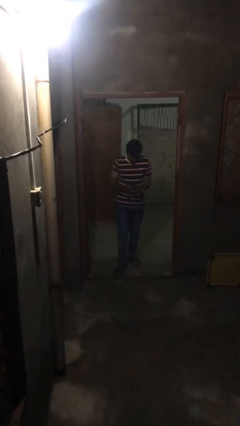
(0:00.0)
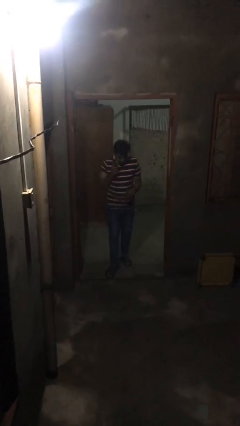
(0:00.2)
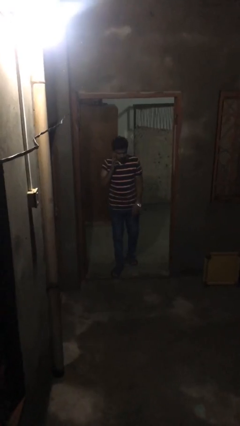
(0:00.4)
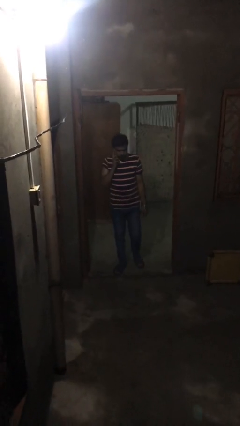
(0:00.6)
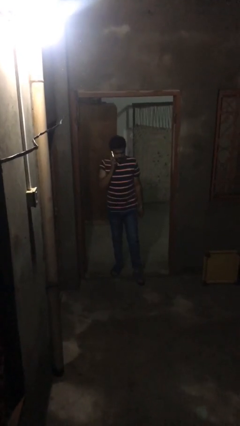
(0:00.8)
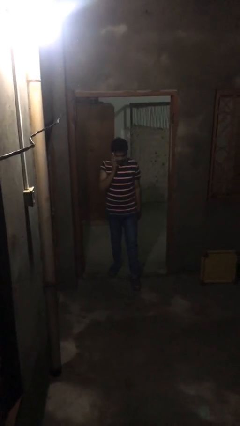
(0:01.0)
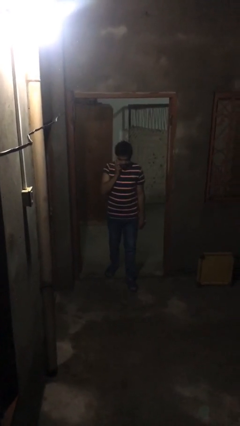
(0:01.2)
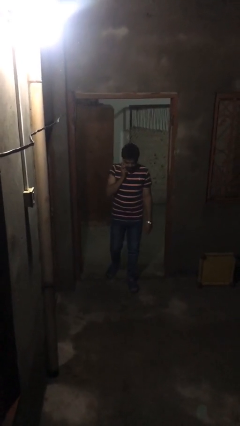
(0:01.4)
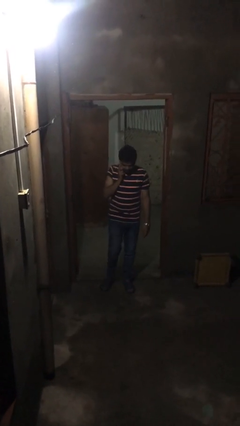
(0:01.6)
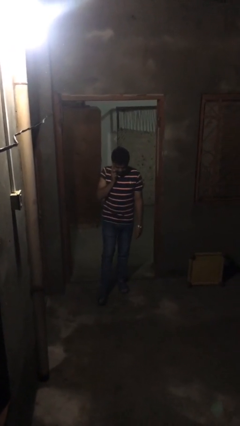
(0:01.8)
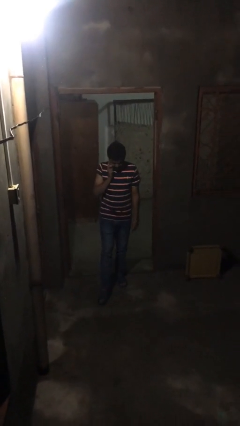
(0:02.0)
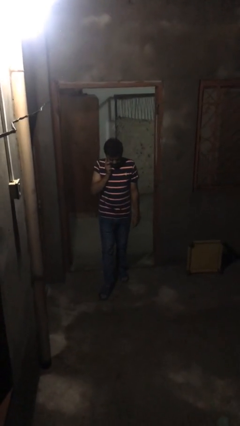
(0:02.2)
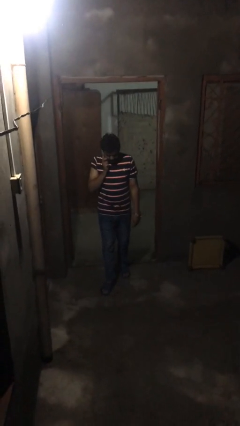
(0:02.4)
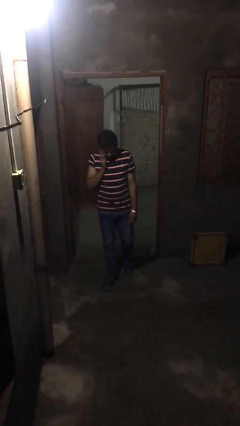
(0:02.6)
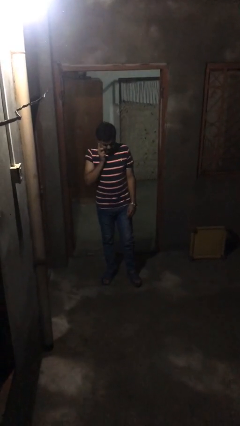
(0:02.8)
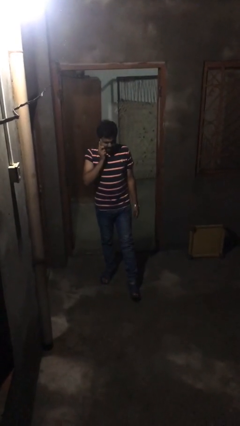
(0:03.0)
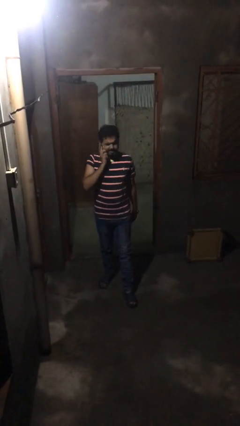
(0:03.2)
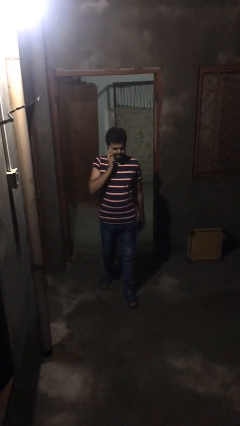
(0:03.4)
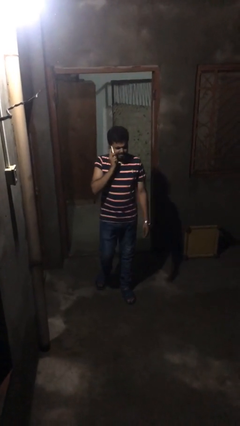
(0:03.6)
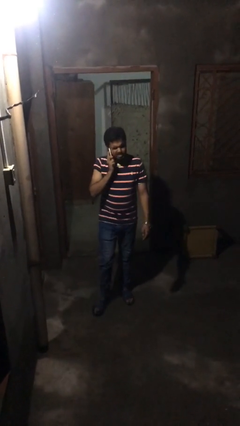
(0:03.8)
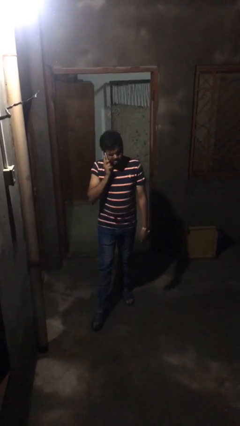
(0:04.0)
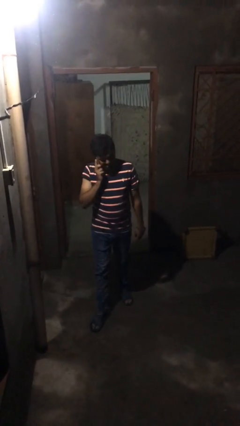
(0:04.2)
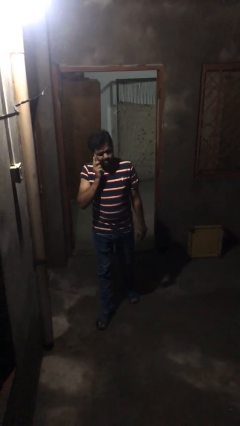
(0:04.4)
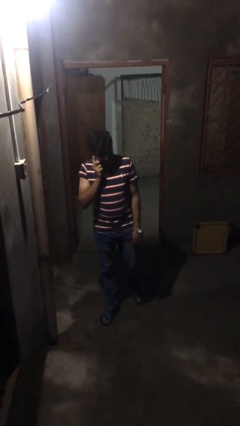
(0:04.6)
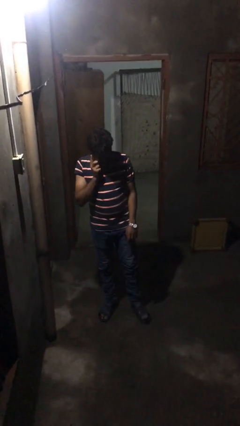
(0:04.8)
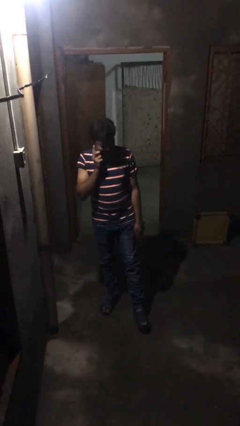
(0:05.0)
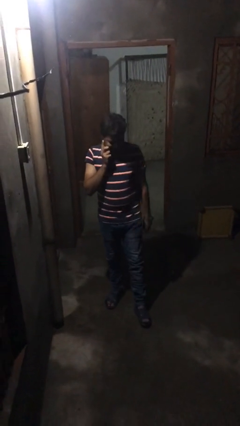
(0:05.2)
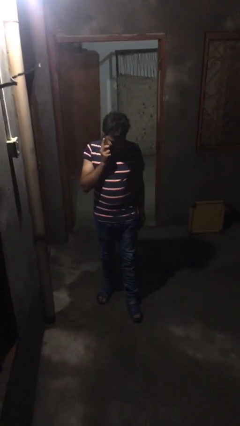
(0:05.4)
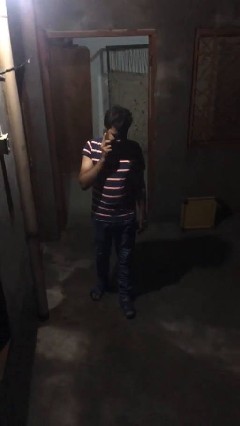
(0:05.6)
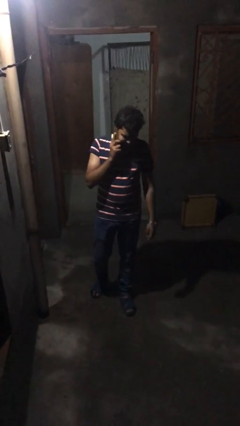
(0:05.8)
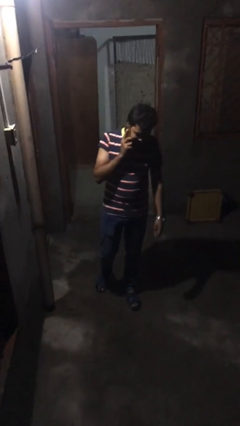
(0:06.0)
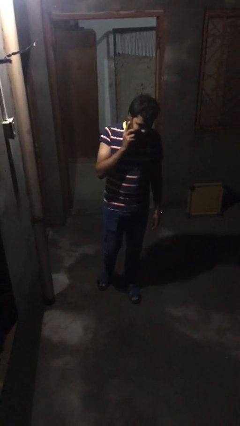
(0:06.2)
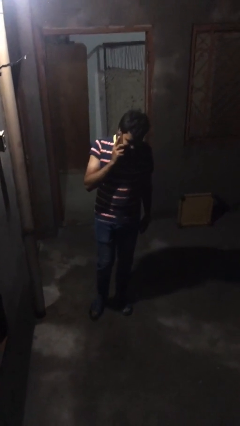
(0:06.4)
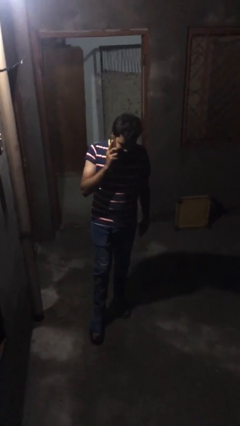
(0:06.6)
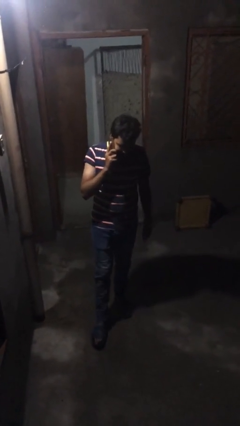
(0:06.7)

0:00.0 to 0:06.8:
person talks on phone

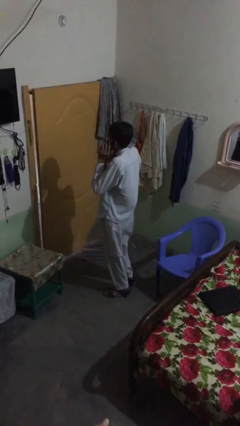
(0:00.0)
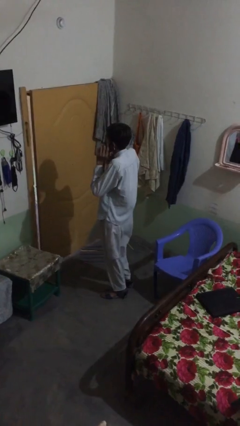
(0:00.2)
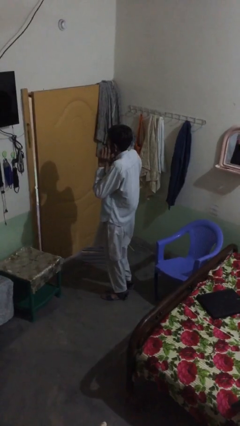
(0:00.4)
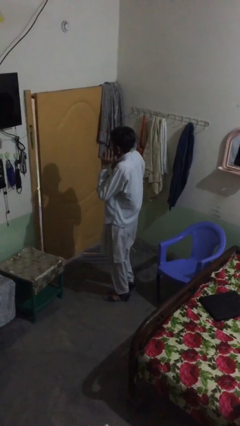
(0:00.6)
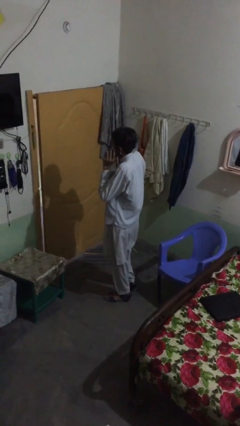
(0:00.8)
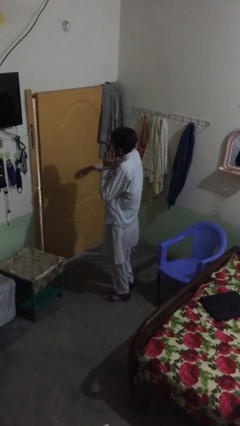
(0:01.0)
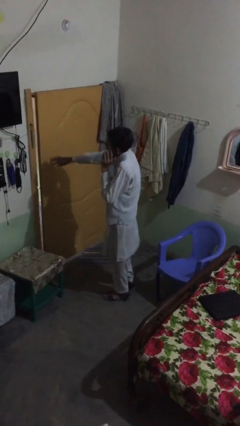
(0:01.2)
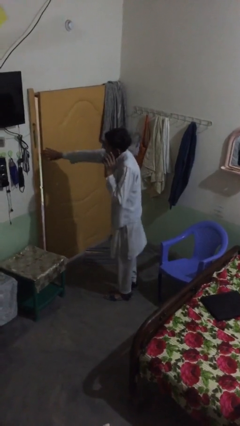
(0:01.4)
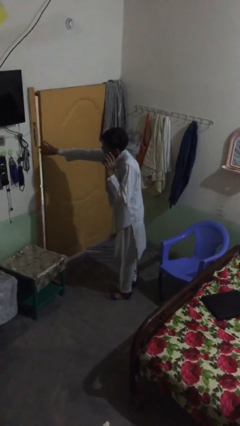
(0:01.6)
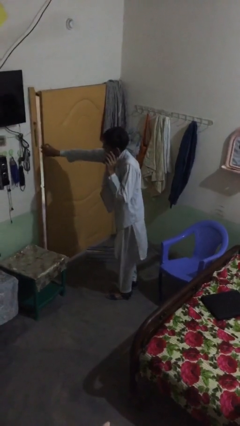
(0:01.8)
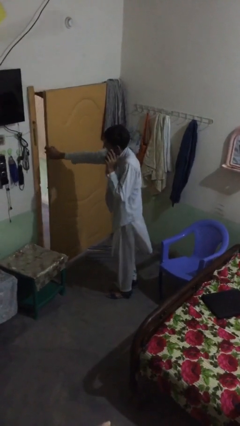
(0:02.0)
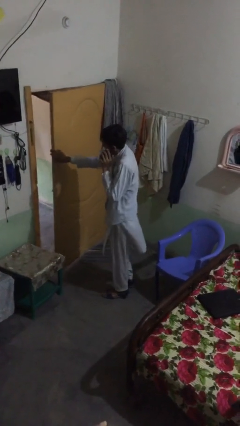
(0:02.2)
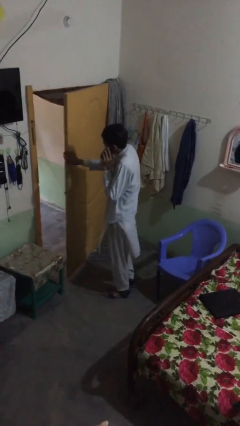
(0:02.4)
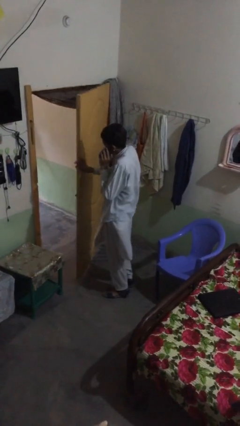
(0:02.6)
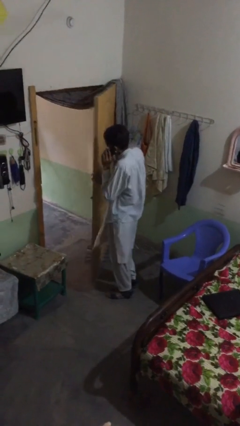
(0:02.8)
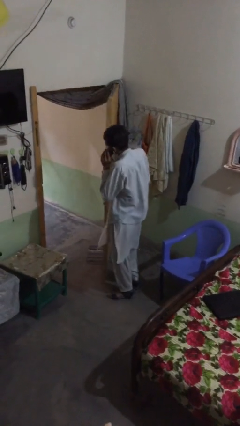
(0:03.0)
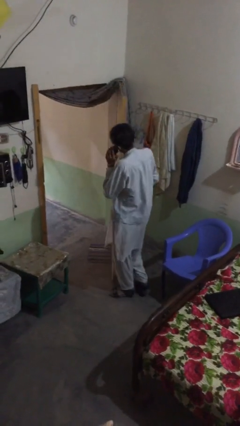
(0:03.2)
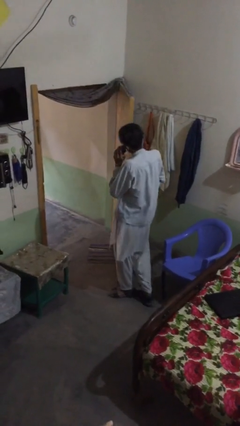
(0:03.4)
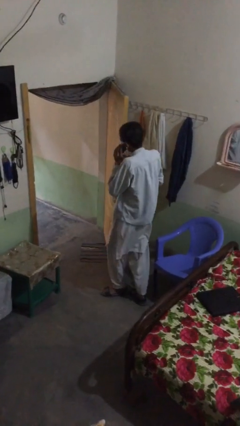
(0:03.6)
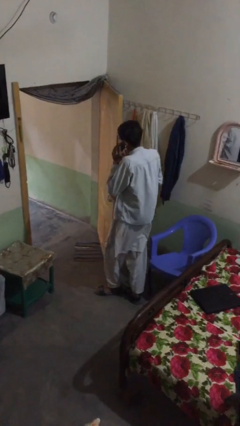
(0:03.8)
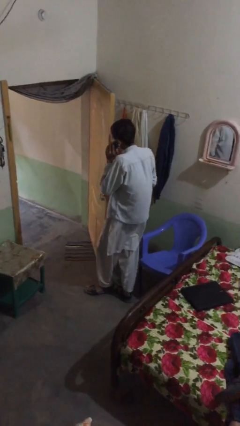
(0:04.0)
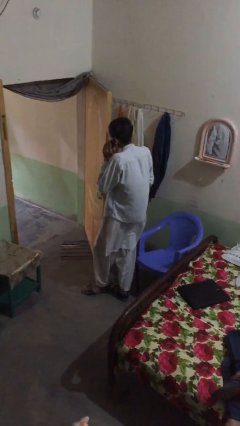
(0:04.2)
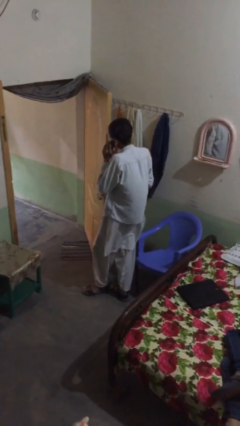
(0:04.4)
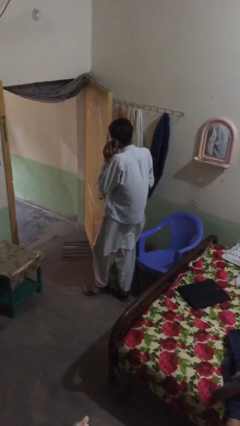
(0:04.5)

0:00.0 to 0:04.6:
person opens facility door

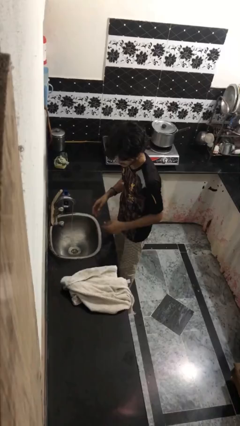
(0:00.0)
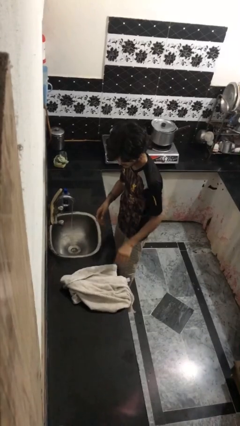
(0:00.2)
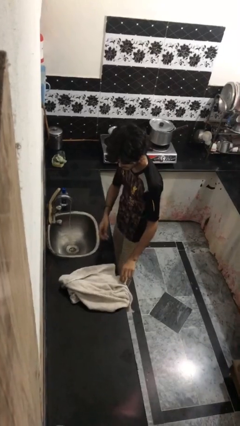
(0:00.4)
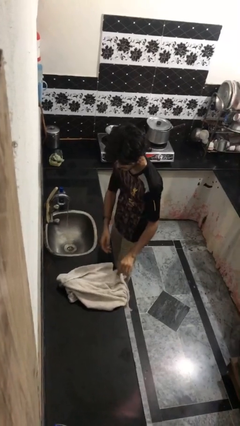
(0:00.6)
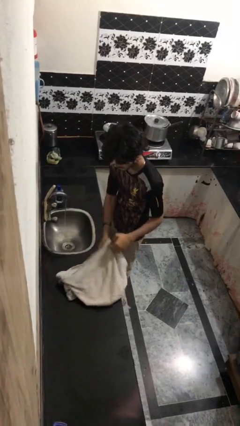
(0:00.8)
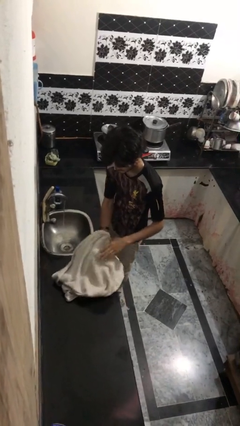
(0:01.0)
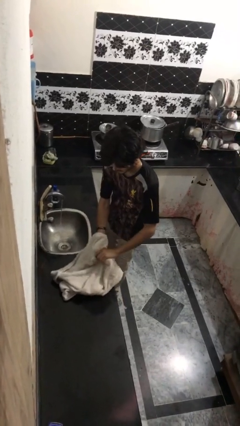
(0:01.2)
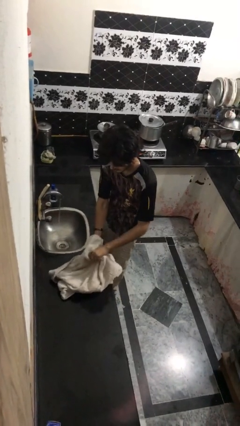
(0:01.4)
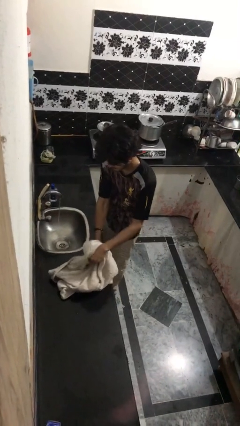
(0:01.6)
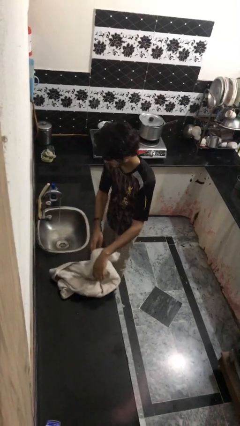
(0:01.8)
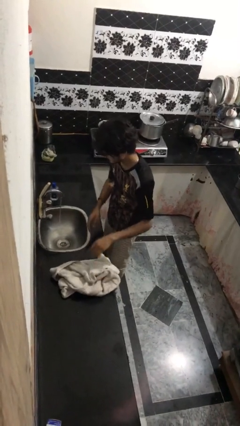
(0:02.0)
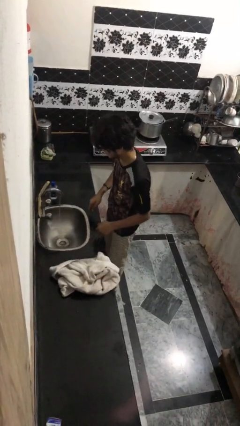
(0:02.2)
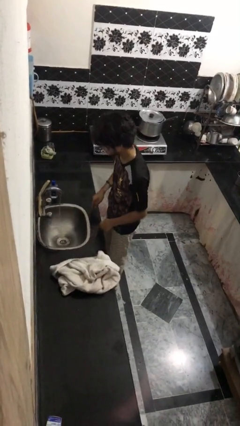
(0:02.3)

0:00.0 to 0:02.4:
person dries hands with towel

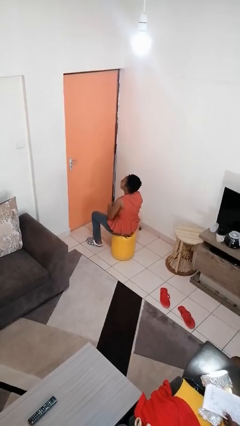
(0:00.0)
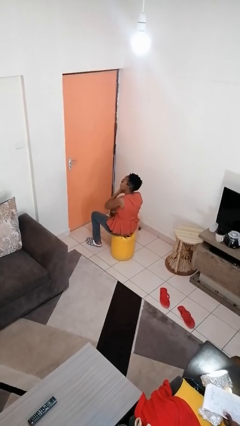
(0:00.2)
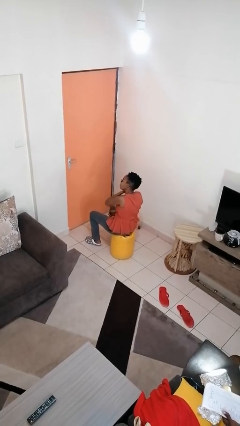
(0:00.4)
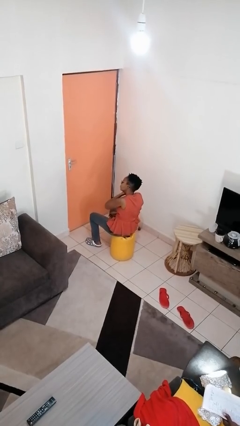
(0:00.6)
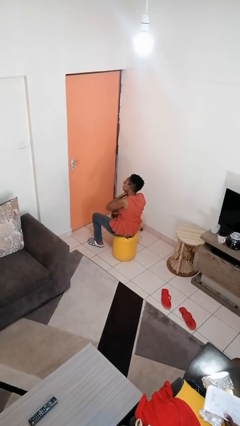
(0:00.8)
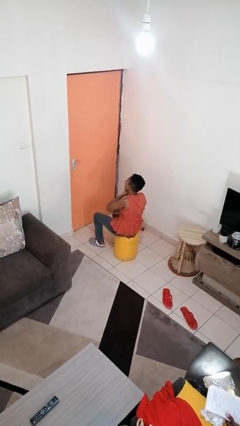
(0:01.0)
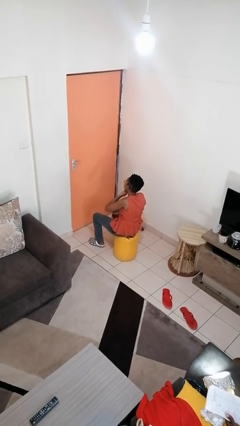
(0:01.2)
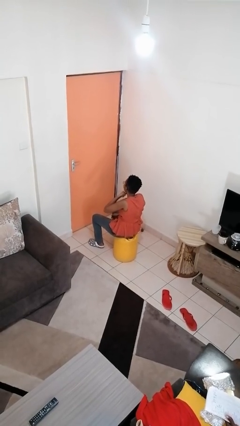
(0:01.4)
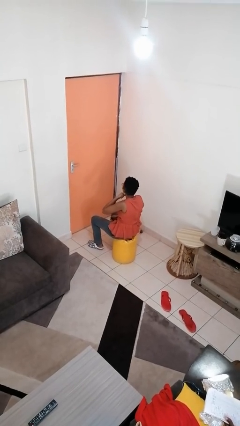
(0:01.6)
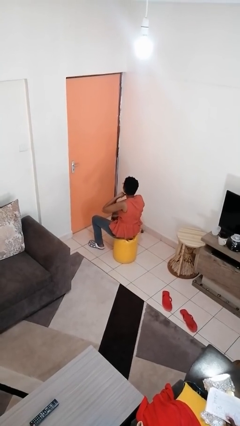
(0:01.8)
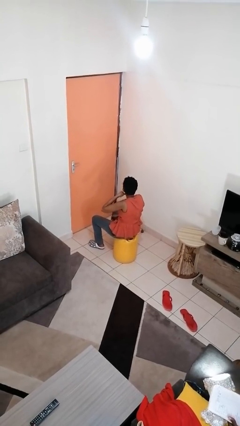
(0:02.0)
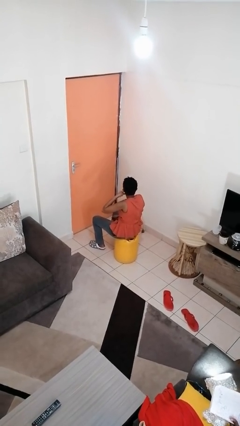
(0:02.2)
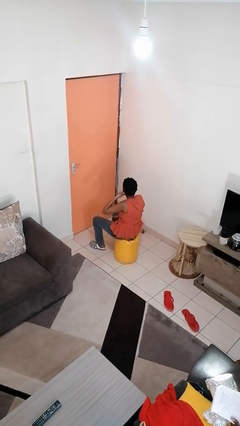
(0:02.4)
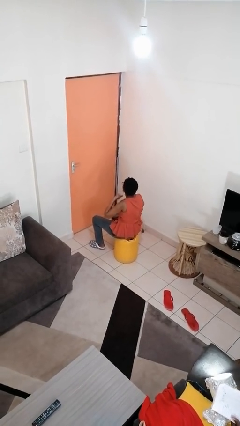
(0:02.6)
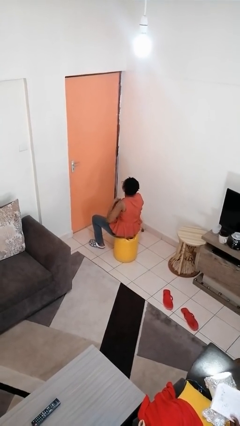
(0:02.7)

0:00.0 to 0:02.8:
person gestures cut

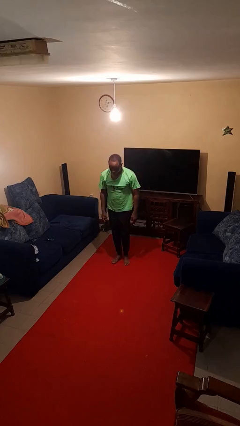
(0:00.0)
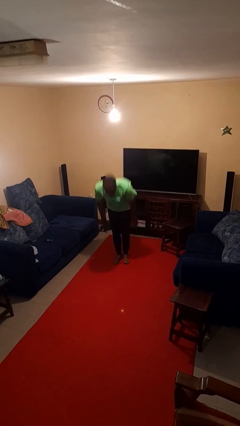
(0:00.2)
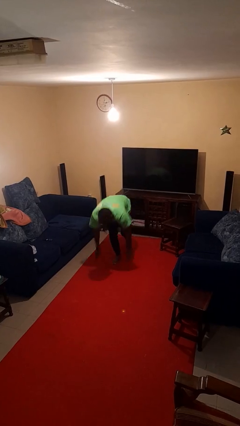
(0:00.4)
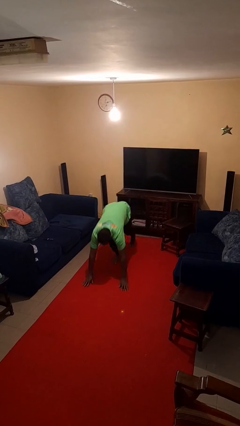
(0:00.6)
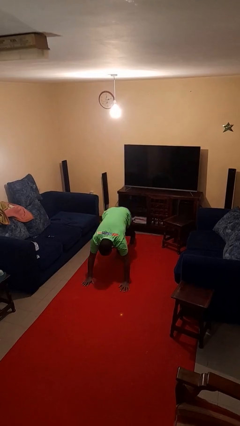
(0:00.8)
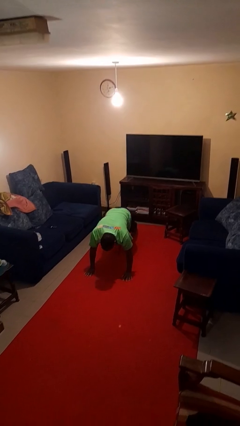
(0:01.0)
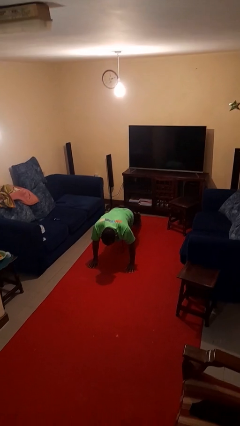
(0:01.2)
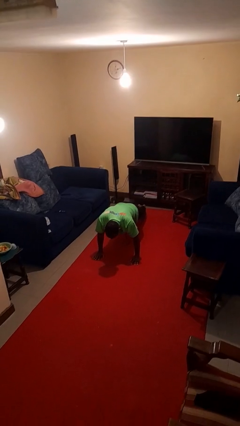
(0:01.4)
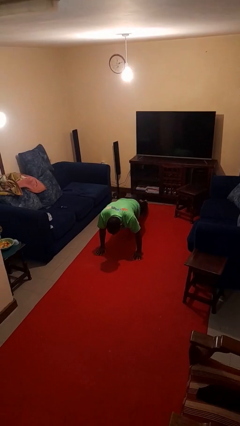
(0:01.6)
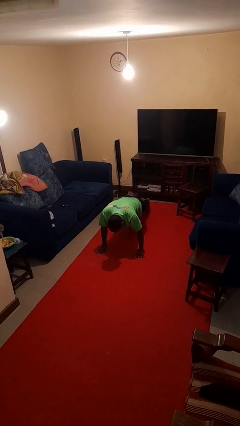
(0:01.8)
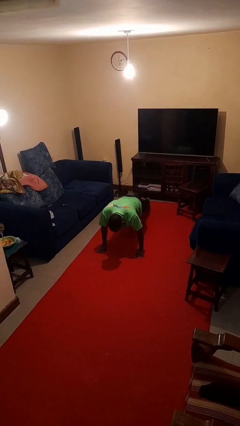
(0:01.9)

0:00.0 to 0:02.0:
person exercises with plank
